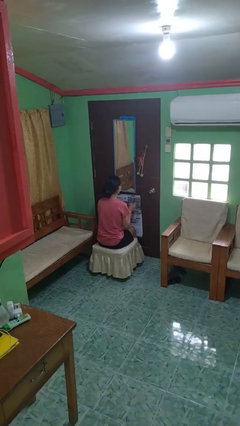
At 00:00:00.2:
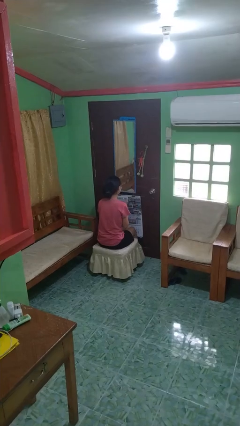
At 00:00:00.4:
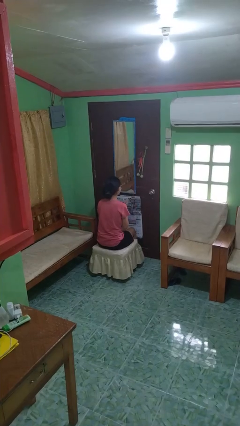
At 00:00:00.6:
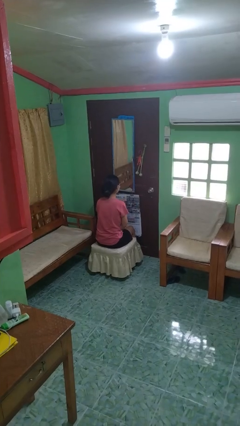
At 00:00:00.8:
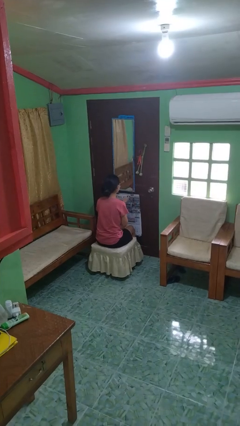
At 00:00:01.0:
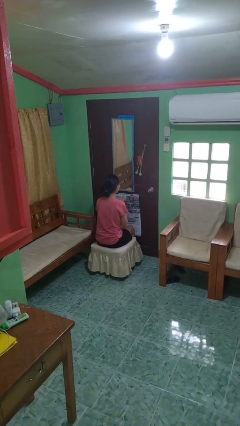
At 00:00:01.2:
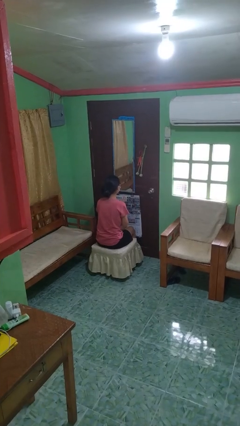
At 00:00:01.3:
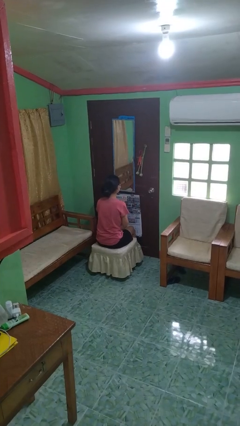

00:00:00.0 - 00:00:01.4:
person claps hands

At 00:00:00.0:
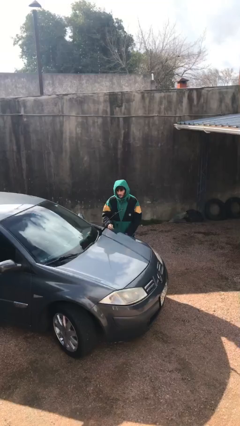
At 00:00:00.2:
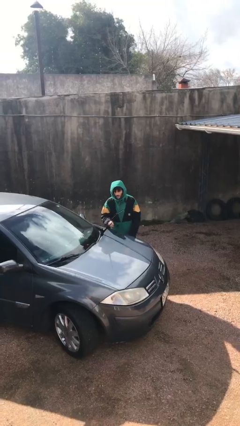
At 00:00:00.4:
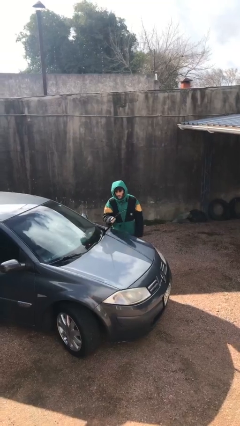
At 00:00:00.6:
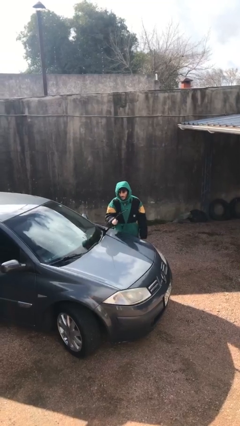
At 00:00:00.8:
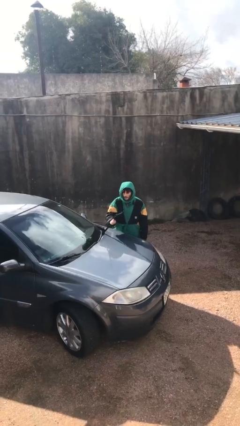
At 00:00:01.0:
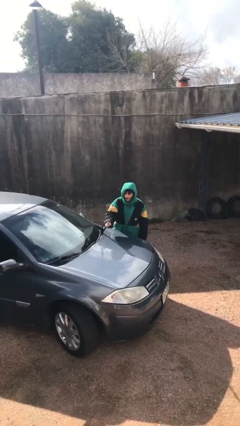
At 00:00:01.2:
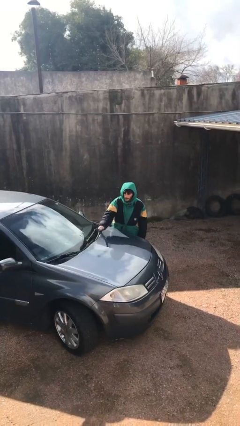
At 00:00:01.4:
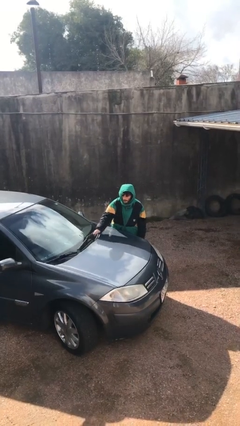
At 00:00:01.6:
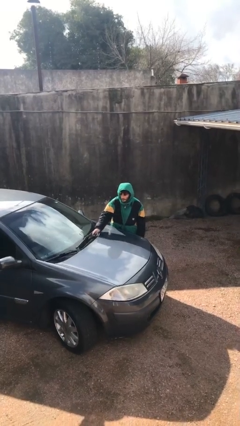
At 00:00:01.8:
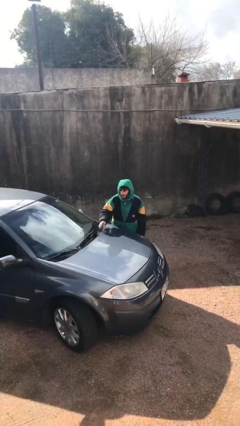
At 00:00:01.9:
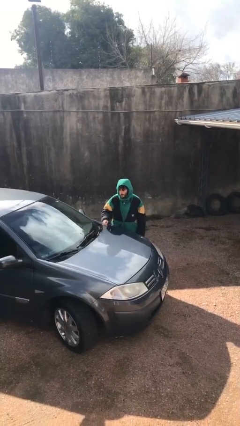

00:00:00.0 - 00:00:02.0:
person flips down car wipers

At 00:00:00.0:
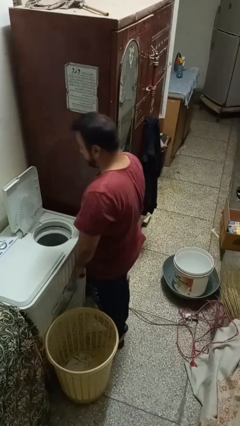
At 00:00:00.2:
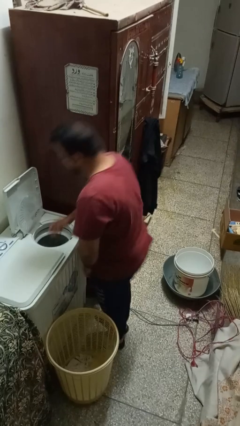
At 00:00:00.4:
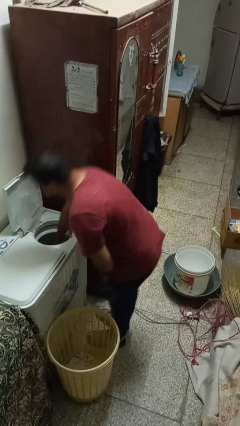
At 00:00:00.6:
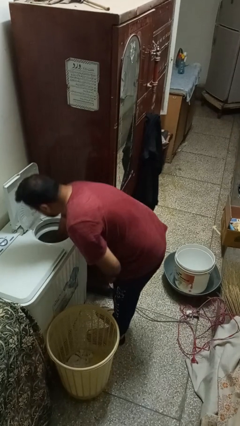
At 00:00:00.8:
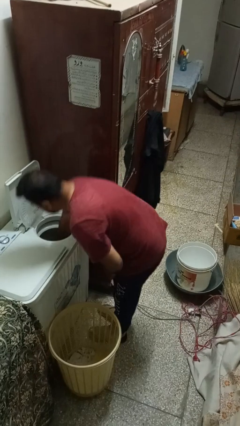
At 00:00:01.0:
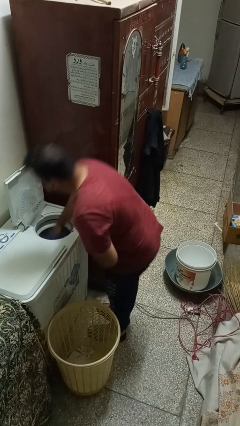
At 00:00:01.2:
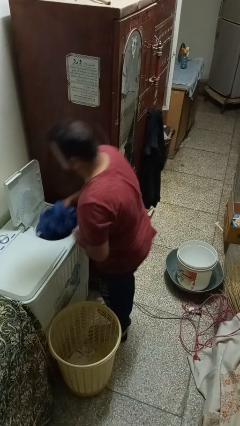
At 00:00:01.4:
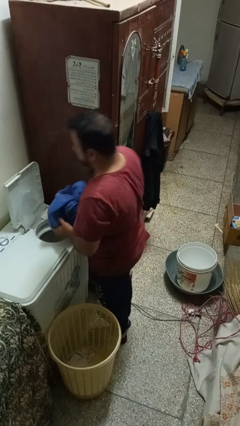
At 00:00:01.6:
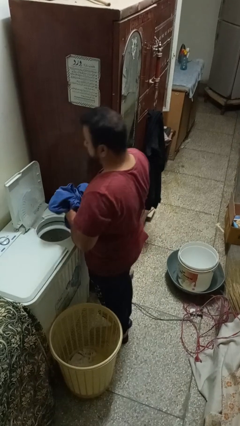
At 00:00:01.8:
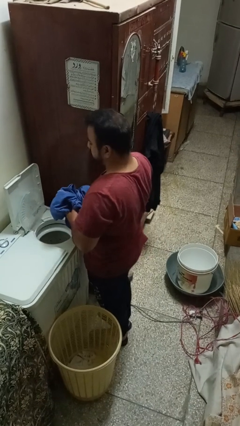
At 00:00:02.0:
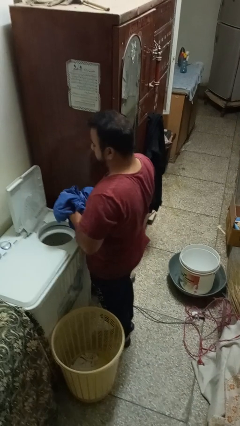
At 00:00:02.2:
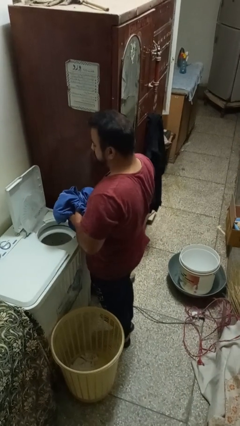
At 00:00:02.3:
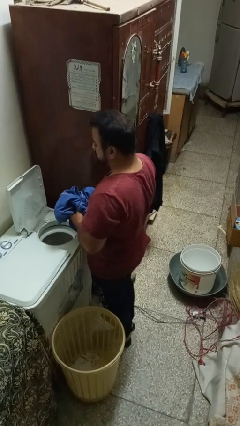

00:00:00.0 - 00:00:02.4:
person unloads dryer

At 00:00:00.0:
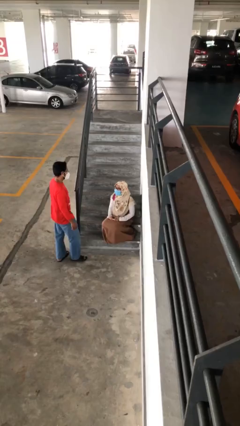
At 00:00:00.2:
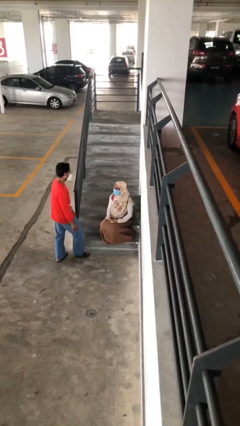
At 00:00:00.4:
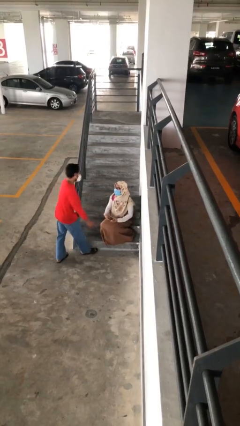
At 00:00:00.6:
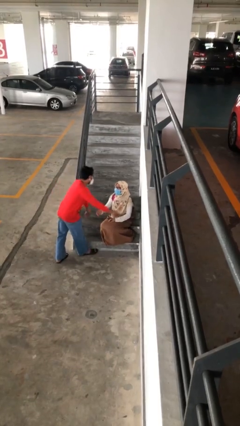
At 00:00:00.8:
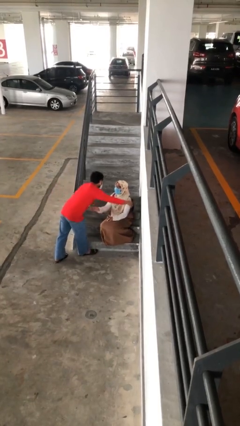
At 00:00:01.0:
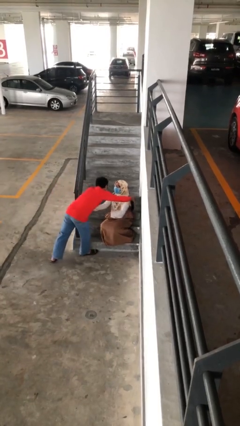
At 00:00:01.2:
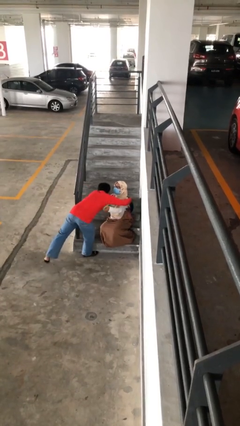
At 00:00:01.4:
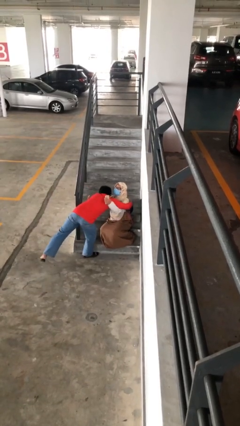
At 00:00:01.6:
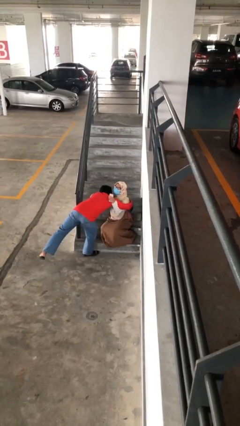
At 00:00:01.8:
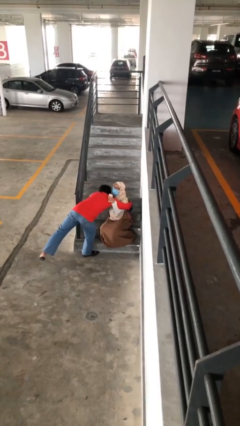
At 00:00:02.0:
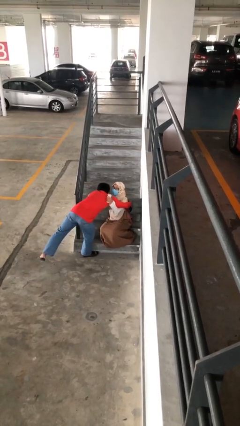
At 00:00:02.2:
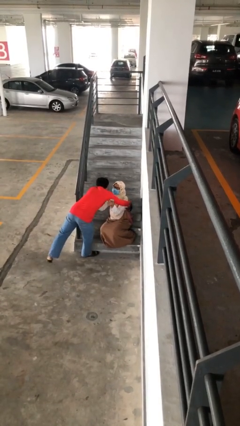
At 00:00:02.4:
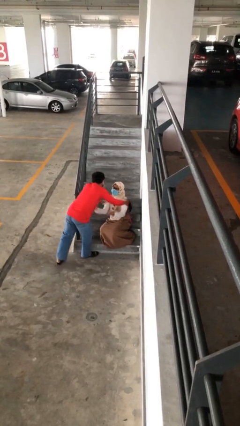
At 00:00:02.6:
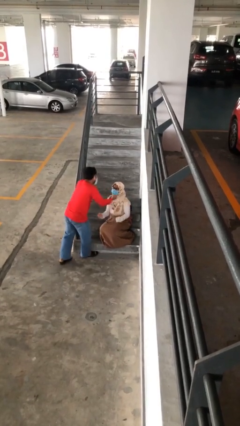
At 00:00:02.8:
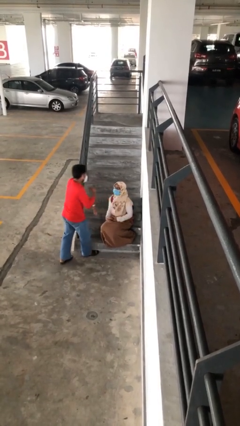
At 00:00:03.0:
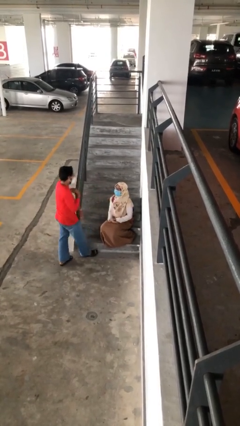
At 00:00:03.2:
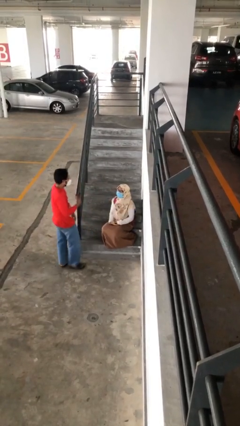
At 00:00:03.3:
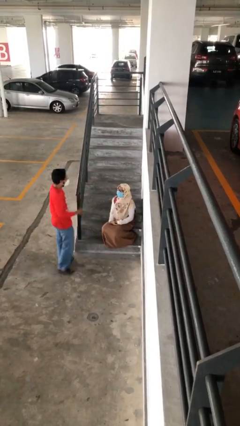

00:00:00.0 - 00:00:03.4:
person embraces person

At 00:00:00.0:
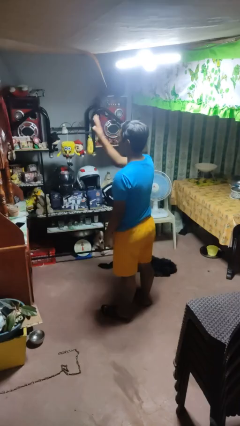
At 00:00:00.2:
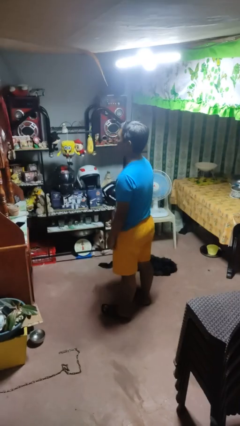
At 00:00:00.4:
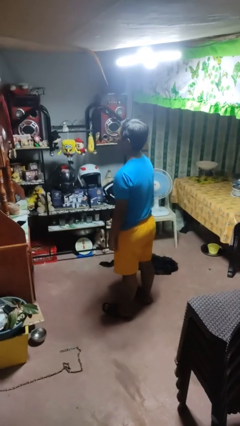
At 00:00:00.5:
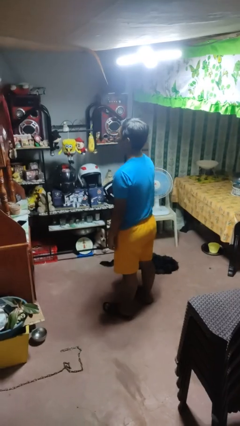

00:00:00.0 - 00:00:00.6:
person gestures swipe down

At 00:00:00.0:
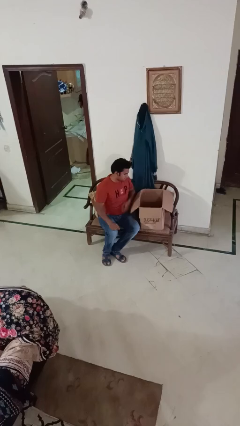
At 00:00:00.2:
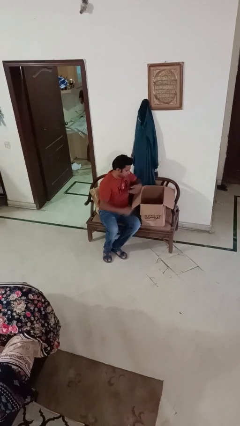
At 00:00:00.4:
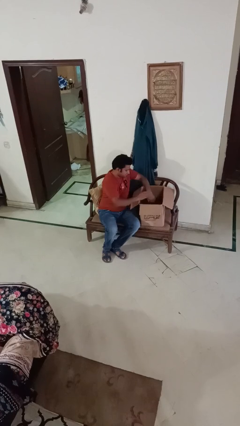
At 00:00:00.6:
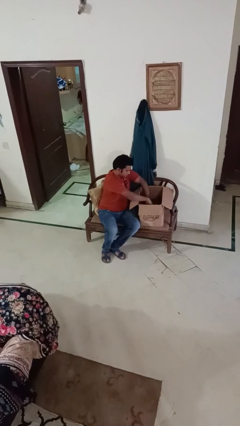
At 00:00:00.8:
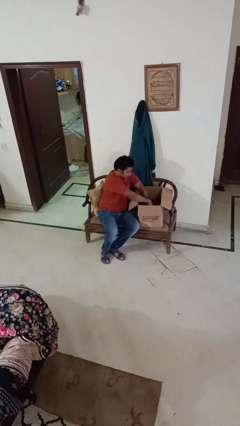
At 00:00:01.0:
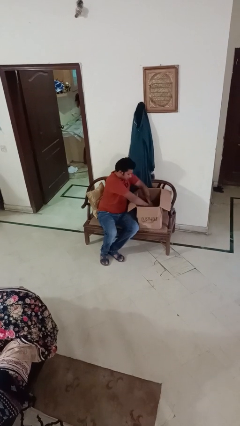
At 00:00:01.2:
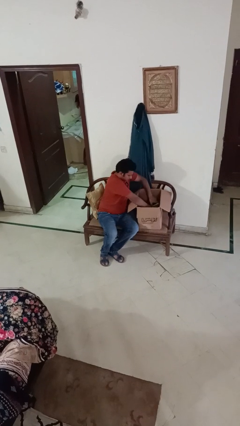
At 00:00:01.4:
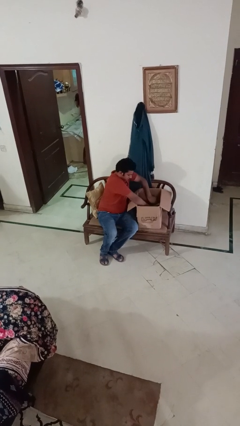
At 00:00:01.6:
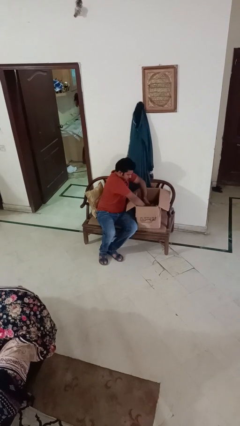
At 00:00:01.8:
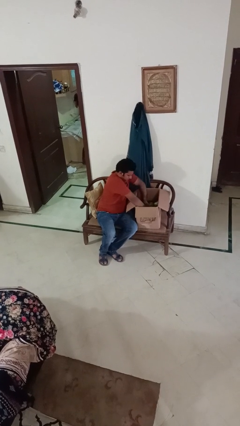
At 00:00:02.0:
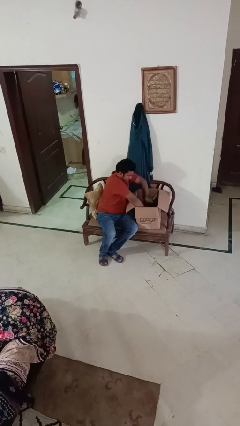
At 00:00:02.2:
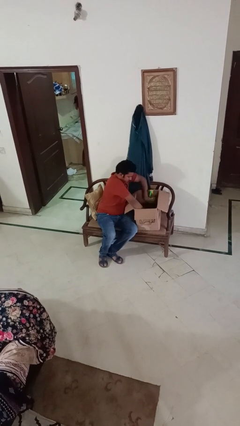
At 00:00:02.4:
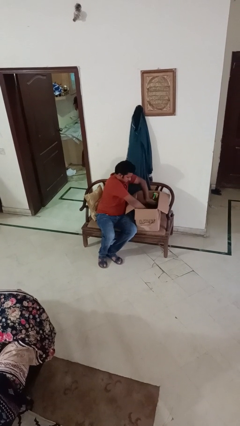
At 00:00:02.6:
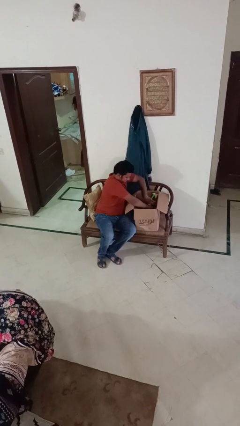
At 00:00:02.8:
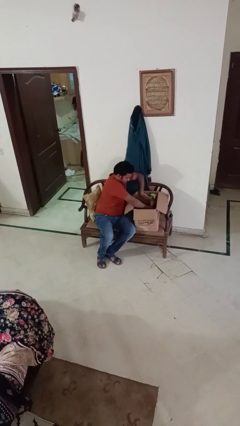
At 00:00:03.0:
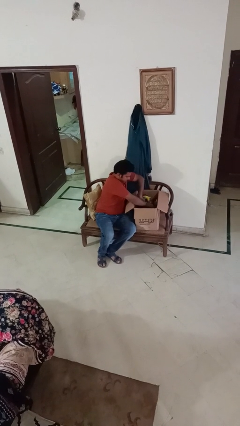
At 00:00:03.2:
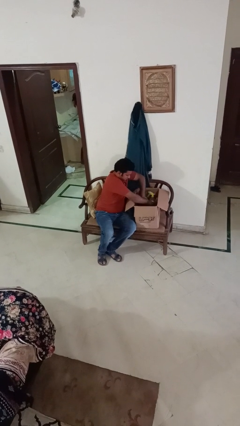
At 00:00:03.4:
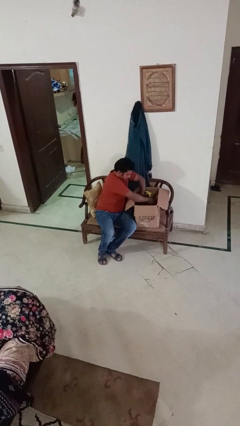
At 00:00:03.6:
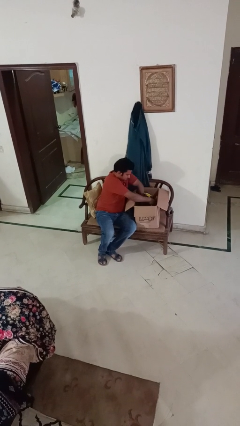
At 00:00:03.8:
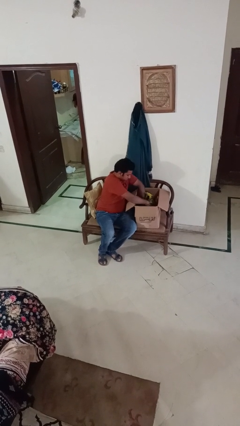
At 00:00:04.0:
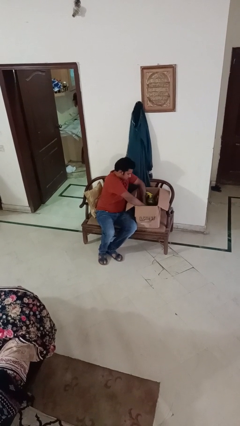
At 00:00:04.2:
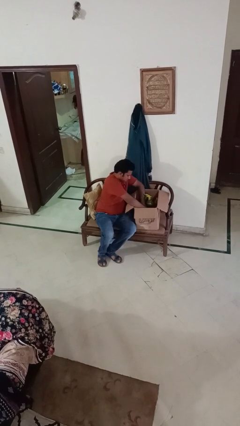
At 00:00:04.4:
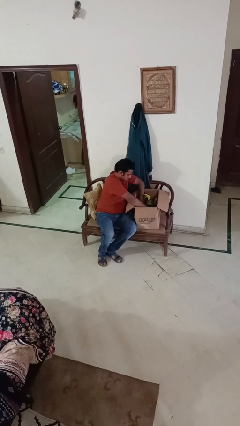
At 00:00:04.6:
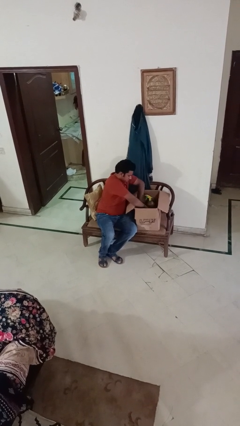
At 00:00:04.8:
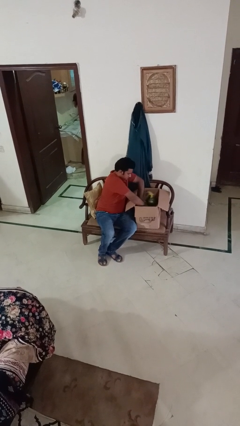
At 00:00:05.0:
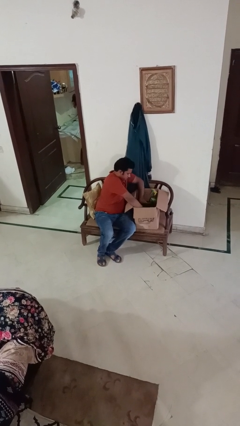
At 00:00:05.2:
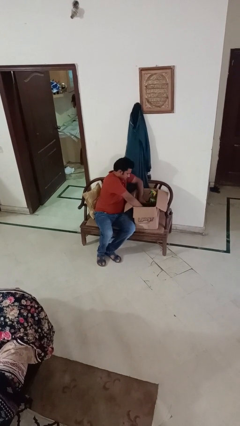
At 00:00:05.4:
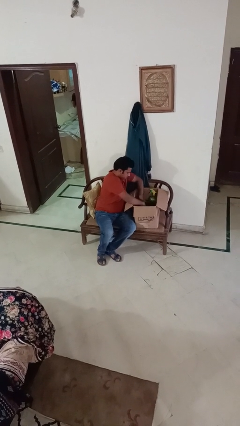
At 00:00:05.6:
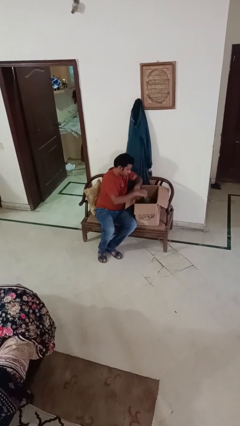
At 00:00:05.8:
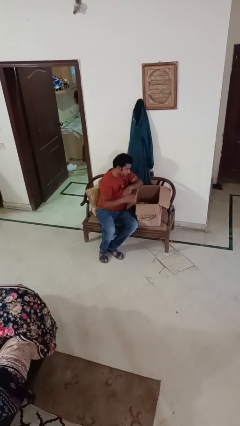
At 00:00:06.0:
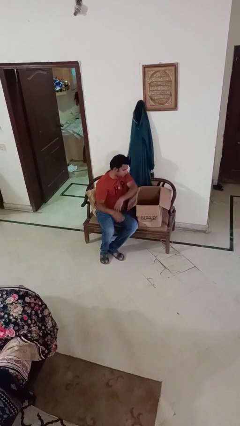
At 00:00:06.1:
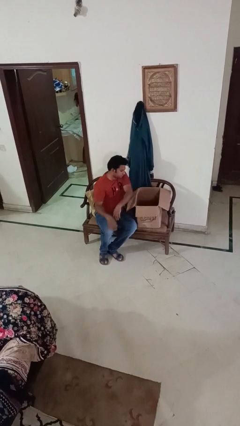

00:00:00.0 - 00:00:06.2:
person searches in box

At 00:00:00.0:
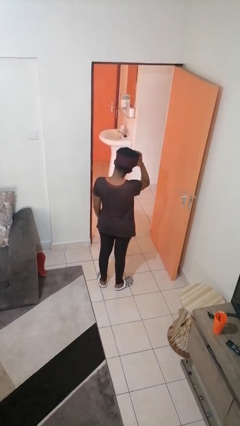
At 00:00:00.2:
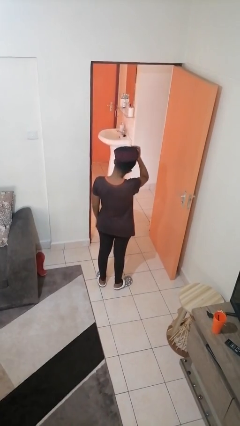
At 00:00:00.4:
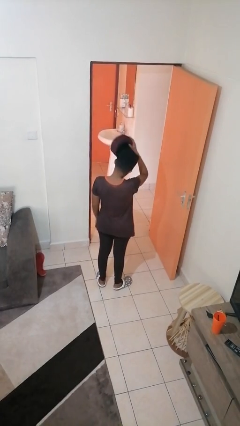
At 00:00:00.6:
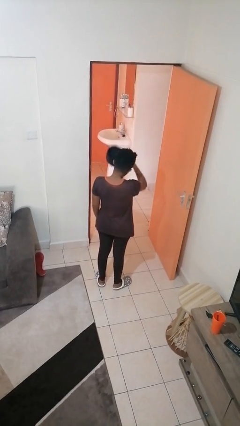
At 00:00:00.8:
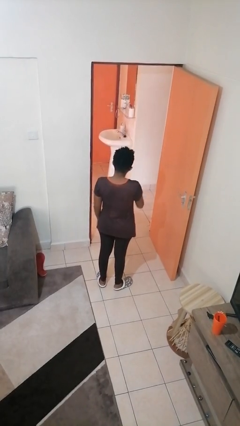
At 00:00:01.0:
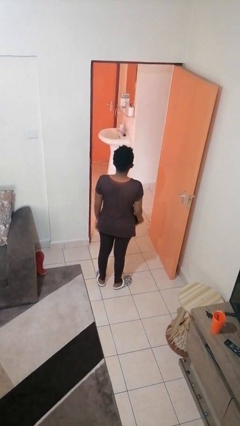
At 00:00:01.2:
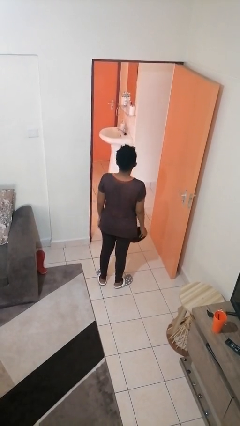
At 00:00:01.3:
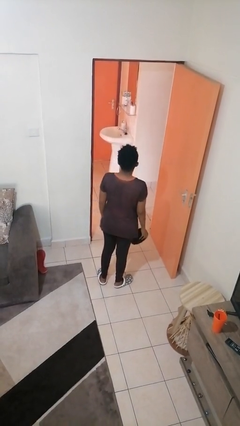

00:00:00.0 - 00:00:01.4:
person takes off hat
